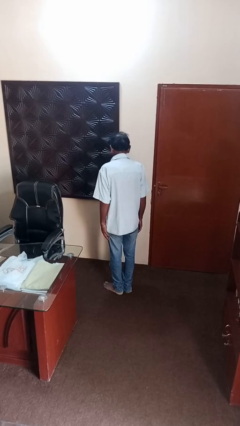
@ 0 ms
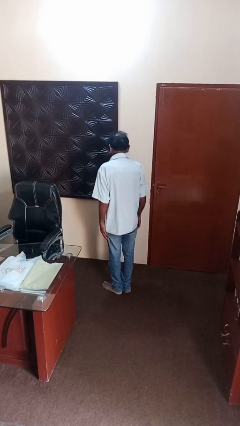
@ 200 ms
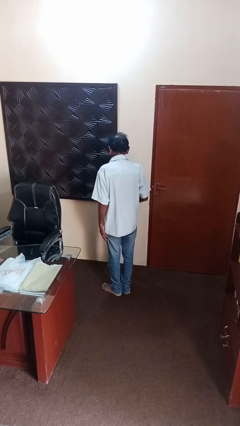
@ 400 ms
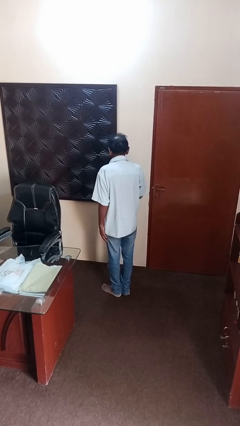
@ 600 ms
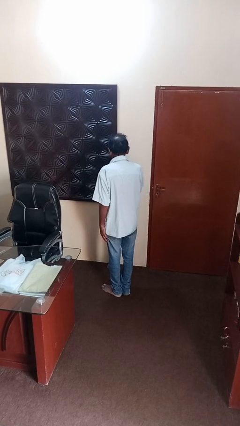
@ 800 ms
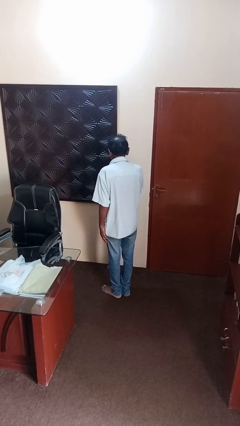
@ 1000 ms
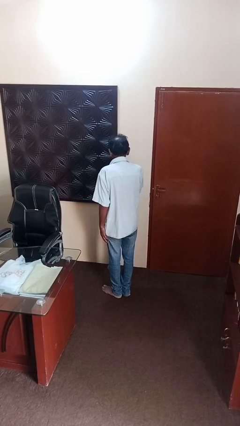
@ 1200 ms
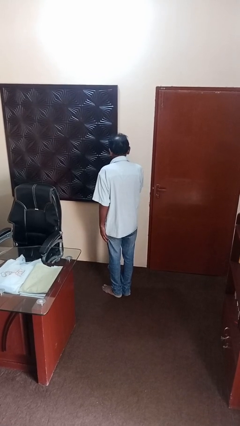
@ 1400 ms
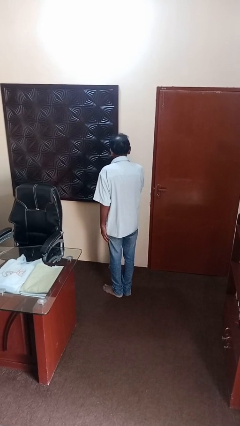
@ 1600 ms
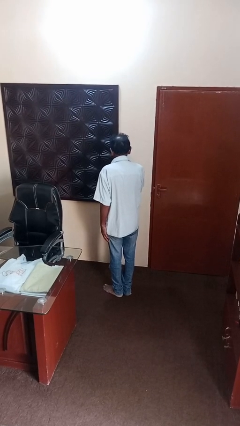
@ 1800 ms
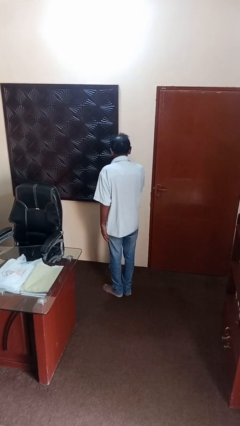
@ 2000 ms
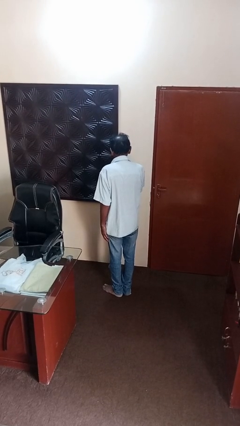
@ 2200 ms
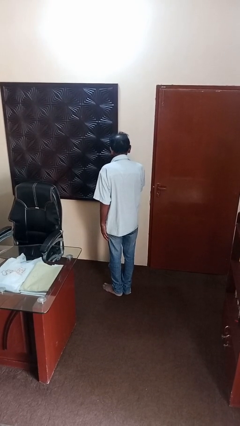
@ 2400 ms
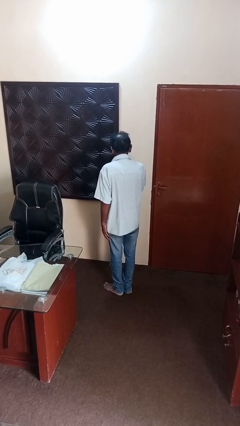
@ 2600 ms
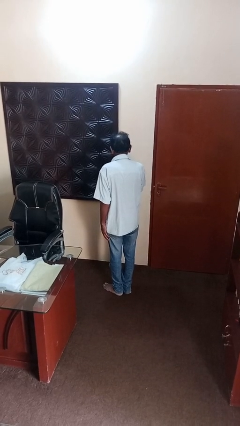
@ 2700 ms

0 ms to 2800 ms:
person licks fingers

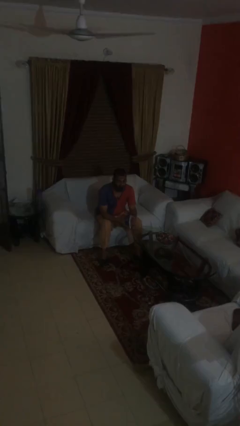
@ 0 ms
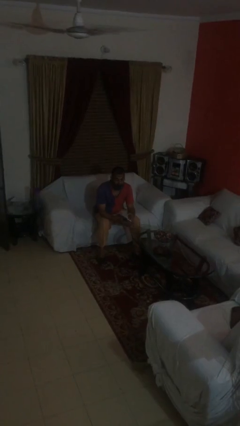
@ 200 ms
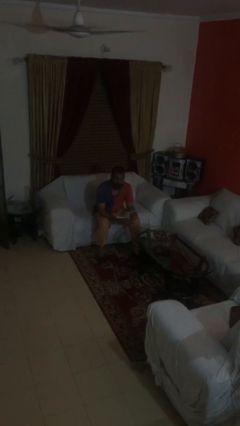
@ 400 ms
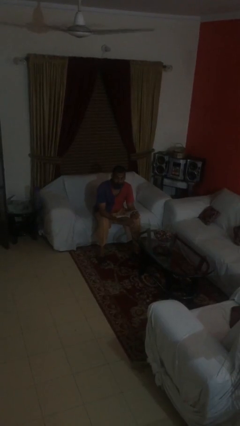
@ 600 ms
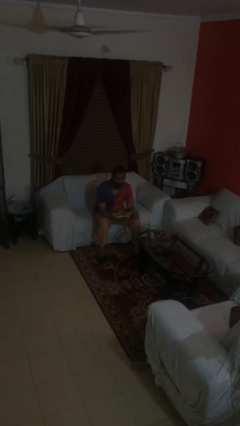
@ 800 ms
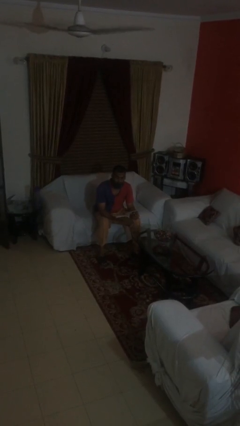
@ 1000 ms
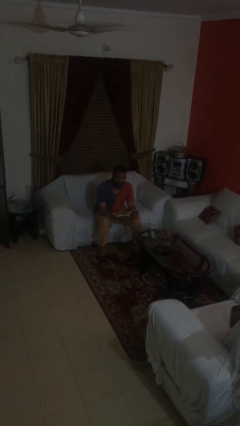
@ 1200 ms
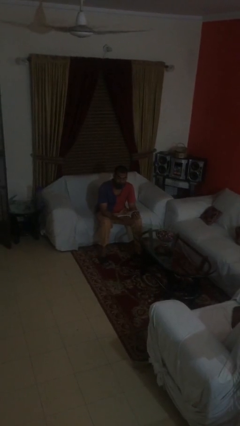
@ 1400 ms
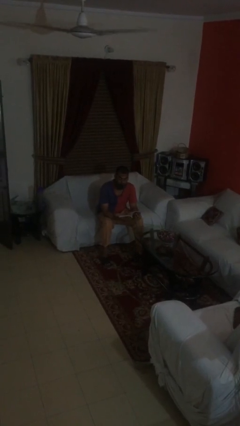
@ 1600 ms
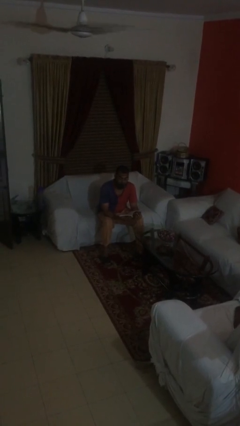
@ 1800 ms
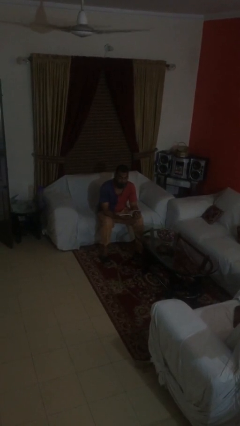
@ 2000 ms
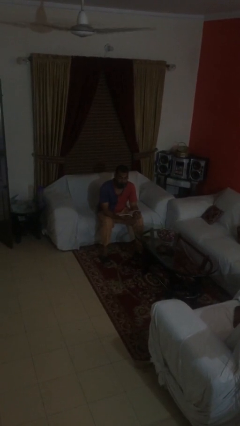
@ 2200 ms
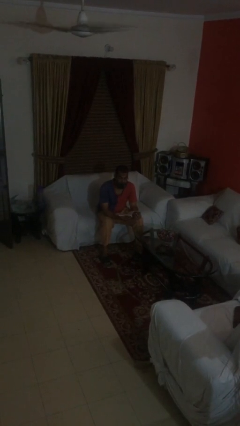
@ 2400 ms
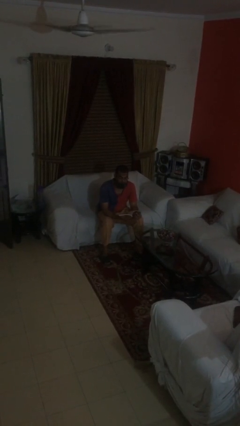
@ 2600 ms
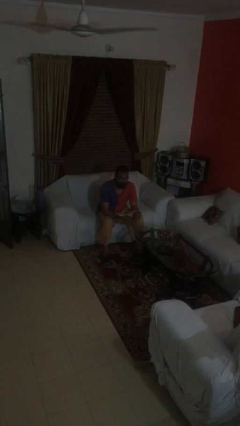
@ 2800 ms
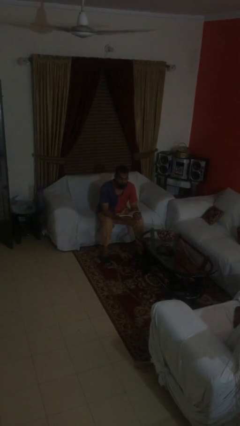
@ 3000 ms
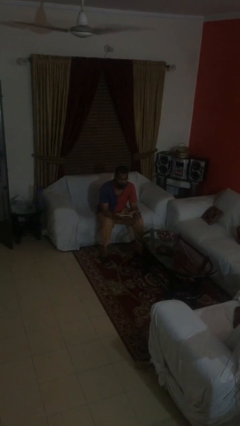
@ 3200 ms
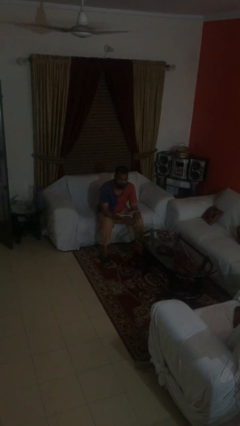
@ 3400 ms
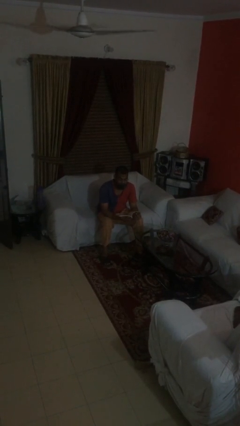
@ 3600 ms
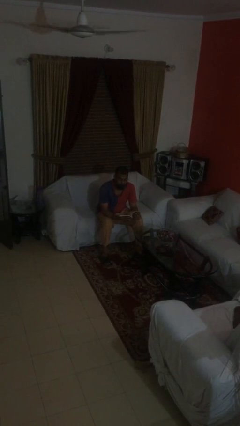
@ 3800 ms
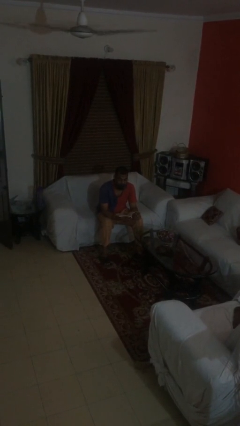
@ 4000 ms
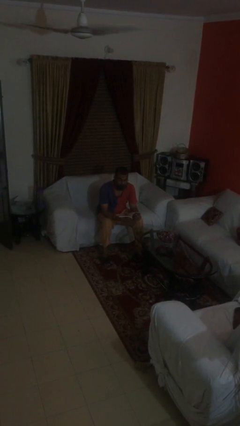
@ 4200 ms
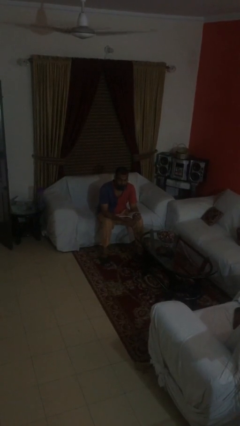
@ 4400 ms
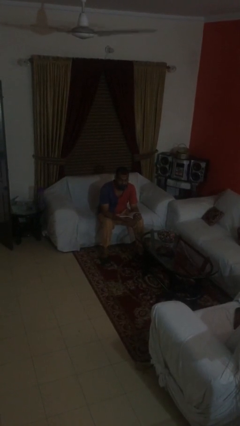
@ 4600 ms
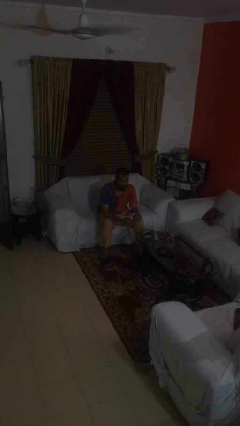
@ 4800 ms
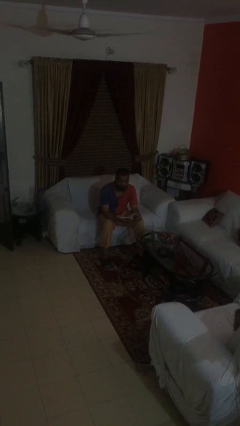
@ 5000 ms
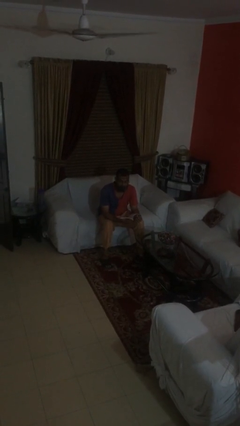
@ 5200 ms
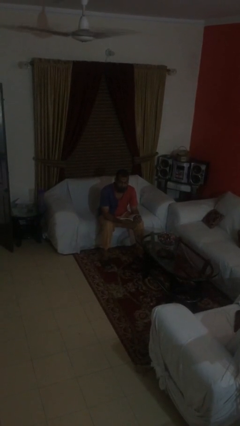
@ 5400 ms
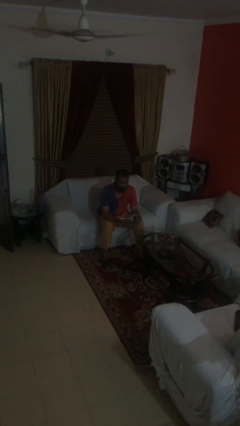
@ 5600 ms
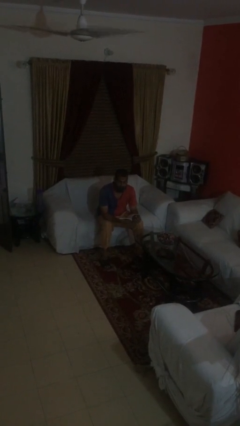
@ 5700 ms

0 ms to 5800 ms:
person reads document

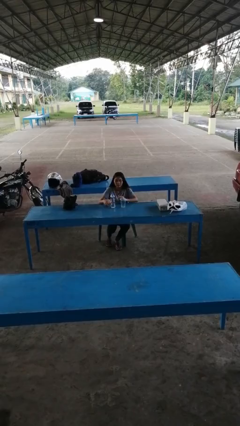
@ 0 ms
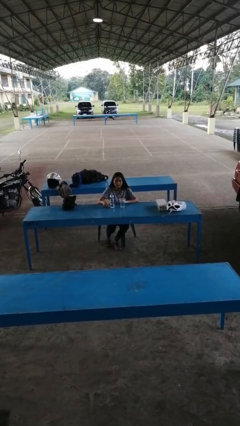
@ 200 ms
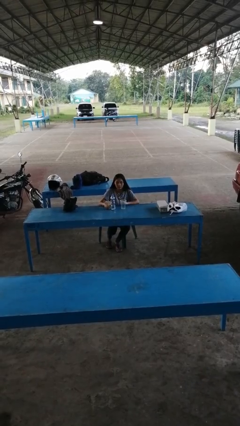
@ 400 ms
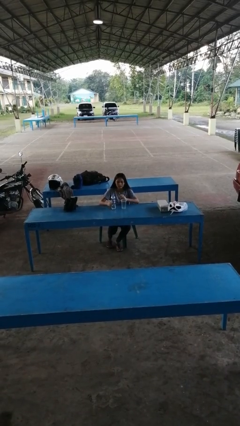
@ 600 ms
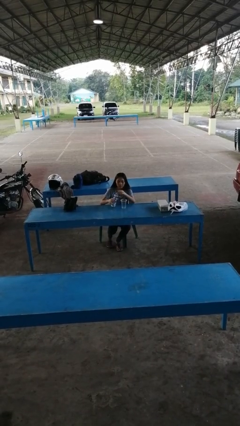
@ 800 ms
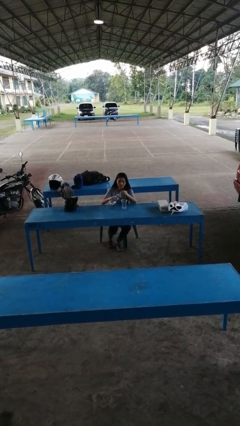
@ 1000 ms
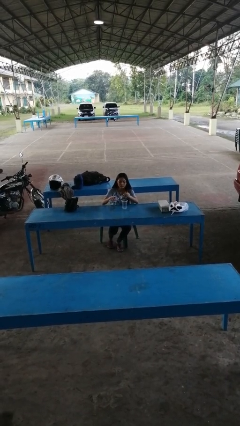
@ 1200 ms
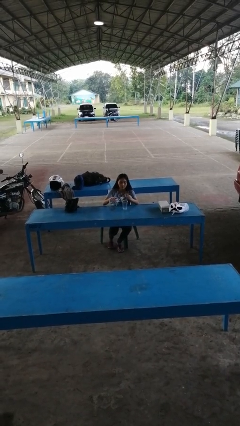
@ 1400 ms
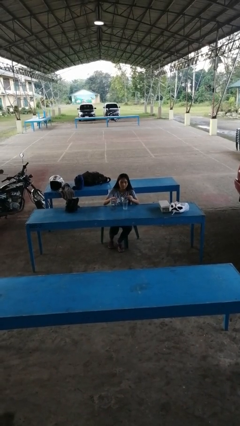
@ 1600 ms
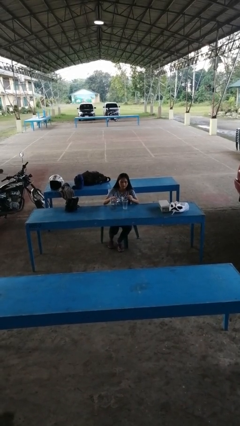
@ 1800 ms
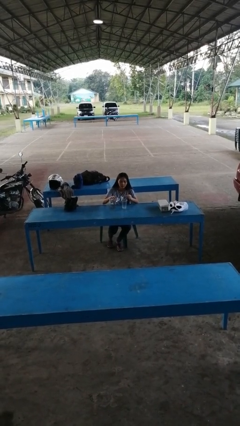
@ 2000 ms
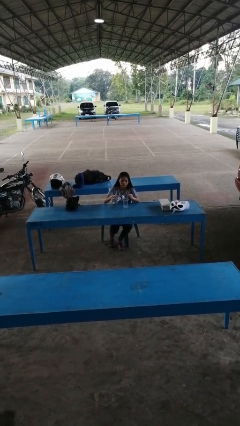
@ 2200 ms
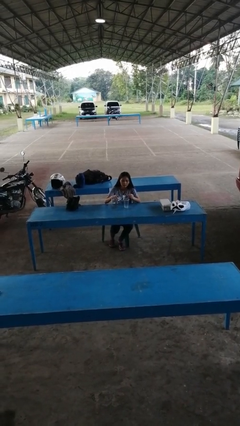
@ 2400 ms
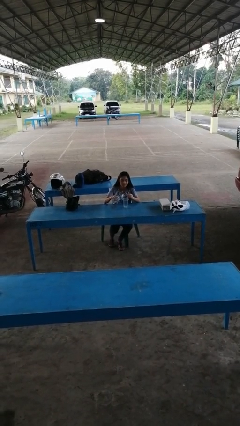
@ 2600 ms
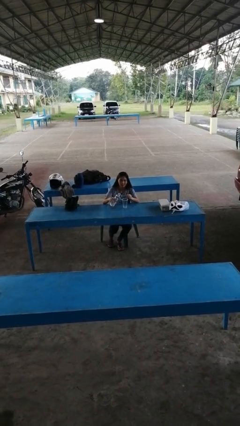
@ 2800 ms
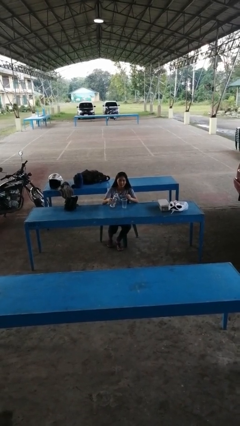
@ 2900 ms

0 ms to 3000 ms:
person pours liquid into cup

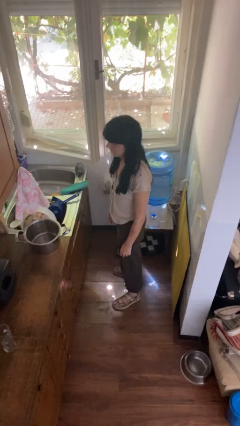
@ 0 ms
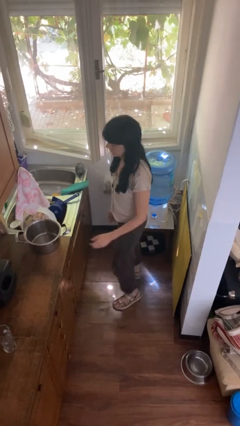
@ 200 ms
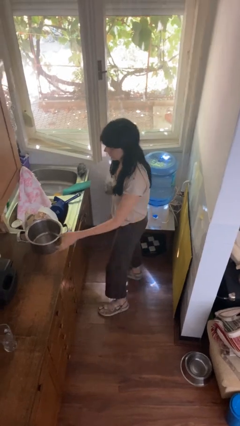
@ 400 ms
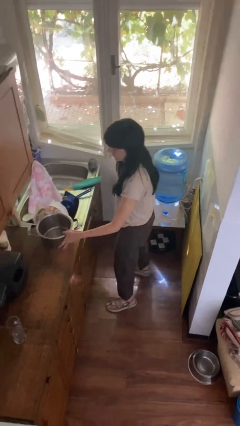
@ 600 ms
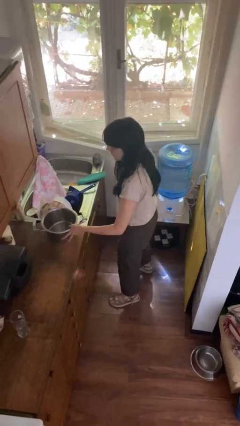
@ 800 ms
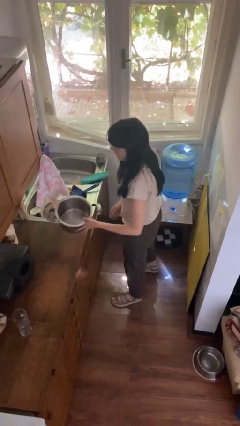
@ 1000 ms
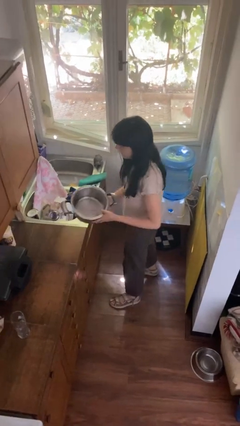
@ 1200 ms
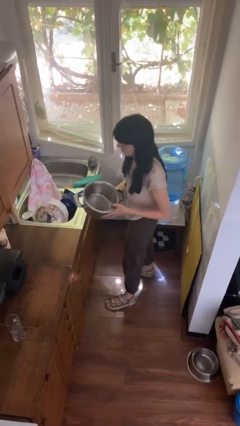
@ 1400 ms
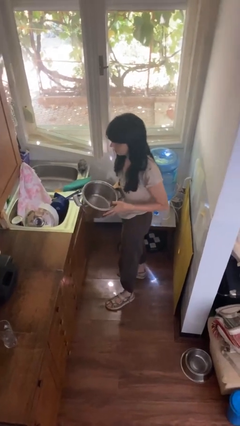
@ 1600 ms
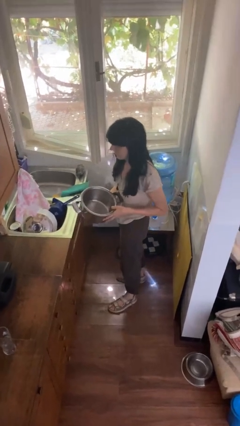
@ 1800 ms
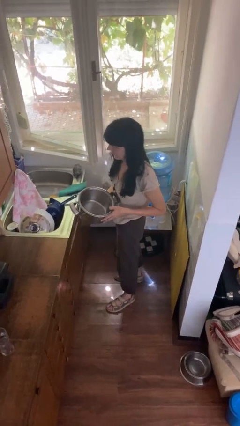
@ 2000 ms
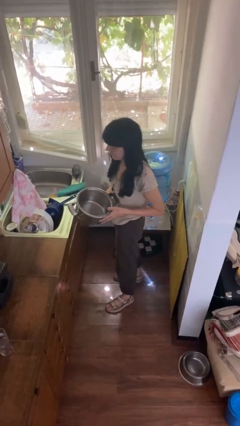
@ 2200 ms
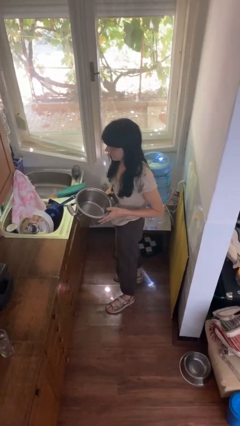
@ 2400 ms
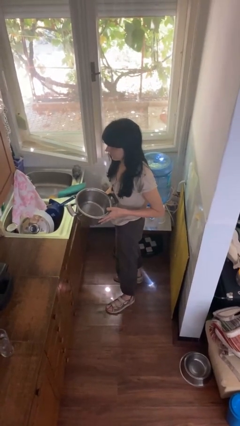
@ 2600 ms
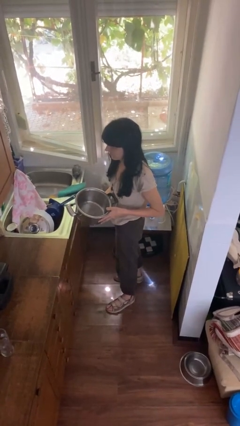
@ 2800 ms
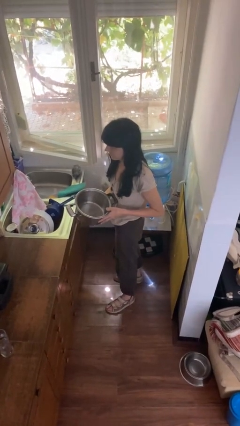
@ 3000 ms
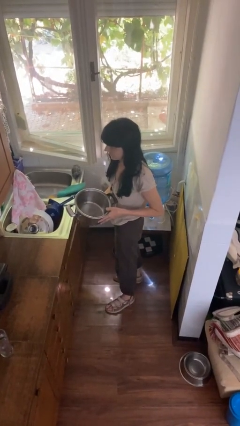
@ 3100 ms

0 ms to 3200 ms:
person picks up object from countertop

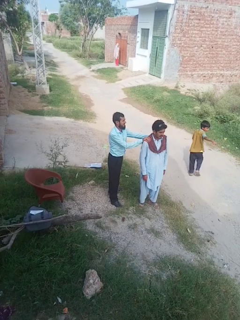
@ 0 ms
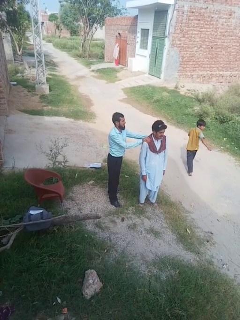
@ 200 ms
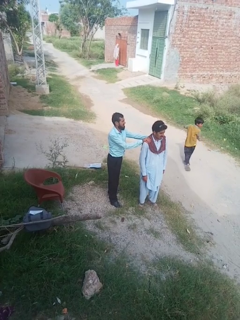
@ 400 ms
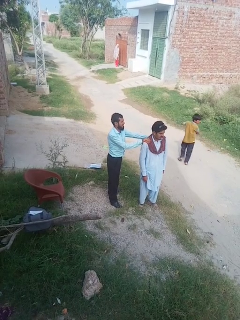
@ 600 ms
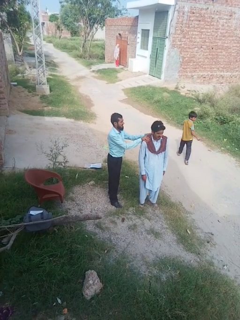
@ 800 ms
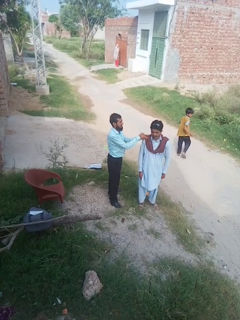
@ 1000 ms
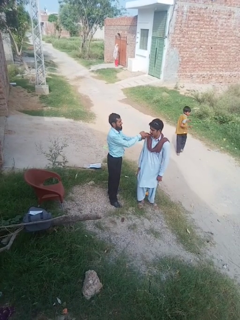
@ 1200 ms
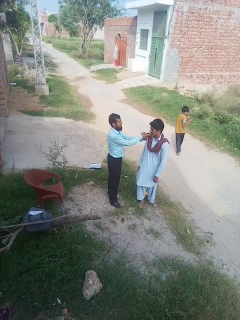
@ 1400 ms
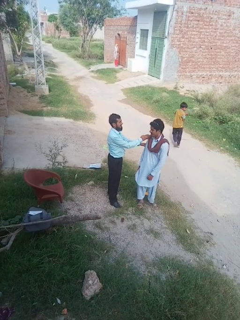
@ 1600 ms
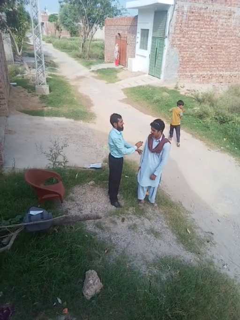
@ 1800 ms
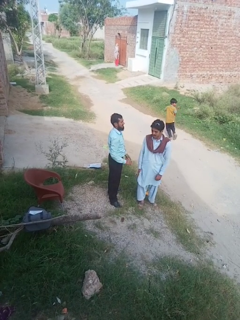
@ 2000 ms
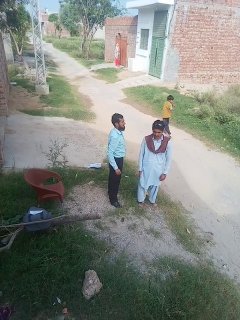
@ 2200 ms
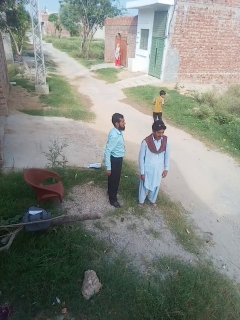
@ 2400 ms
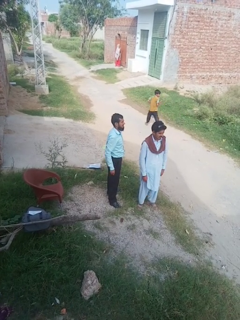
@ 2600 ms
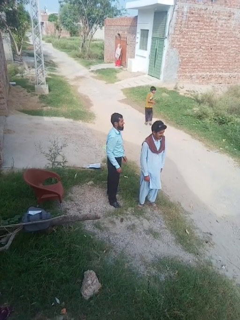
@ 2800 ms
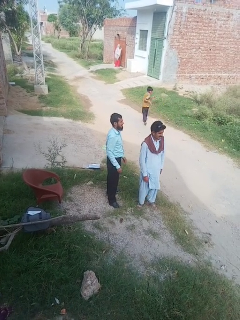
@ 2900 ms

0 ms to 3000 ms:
person spins person around
